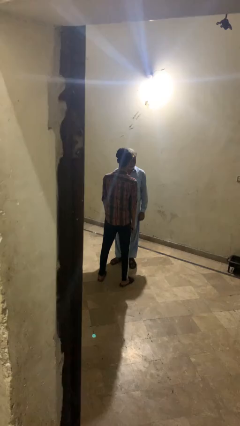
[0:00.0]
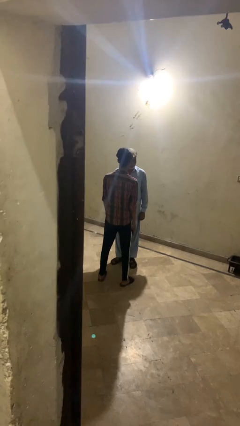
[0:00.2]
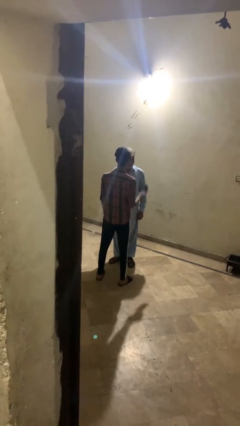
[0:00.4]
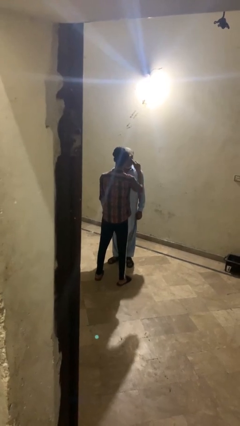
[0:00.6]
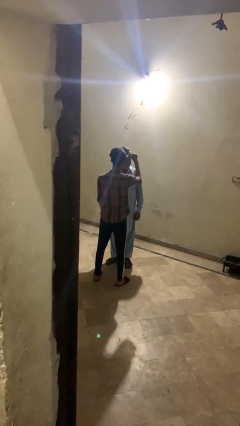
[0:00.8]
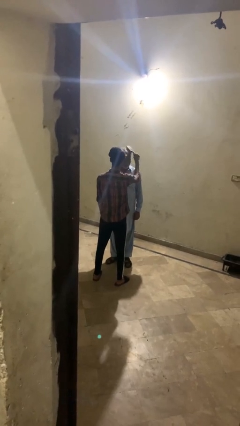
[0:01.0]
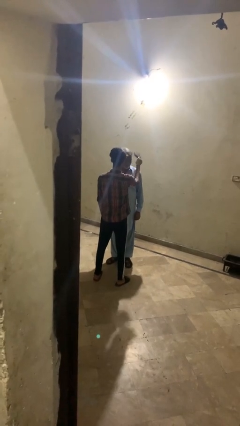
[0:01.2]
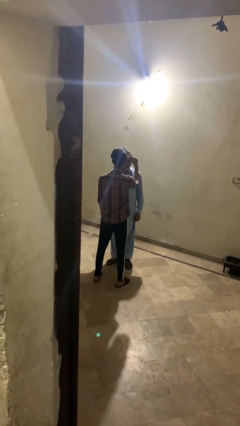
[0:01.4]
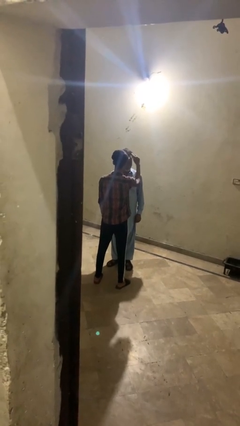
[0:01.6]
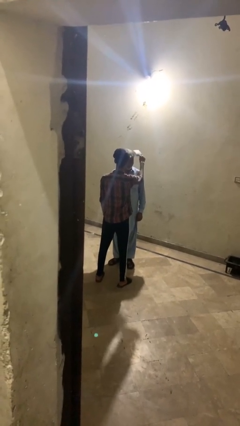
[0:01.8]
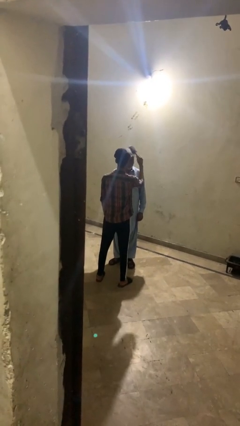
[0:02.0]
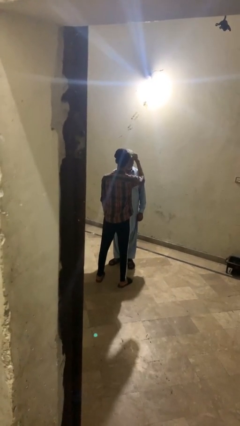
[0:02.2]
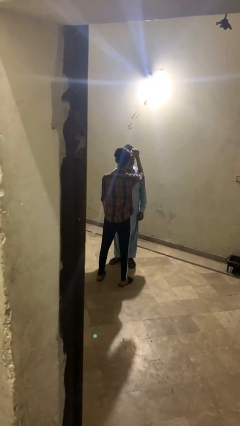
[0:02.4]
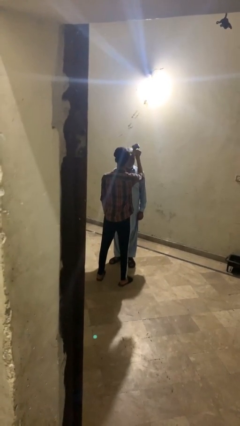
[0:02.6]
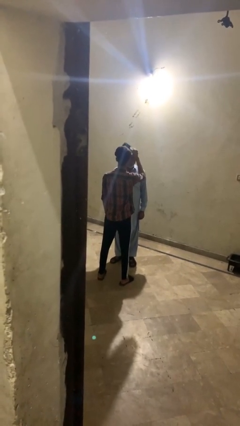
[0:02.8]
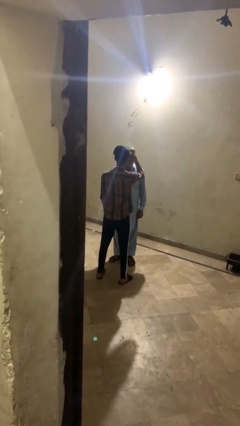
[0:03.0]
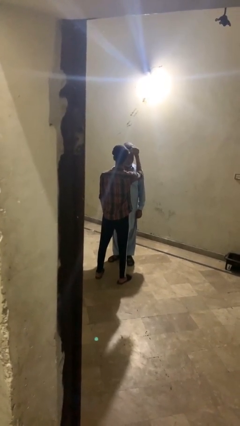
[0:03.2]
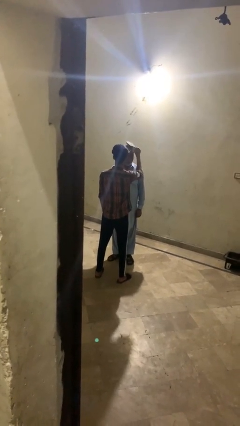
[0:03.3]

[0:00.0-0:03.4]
person brushes hair of person

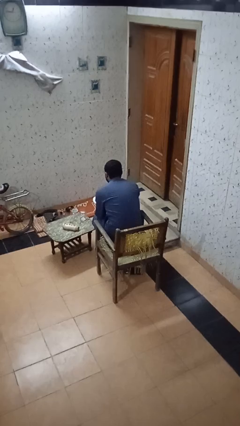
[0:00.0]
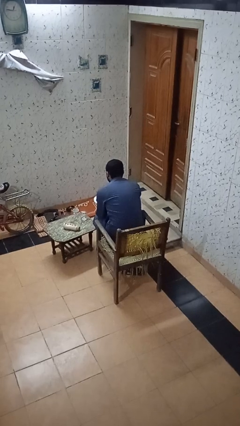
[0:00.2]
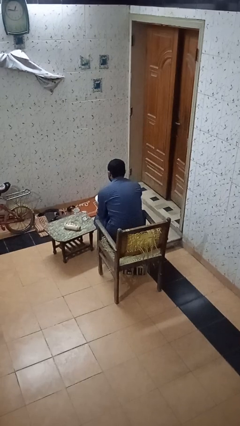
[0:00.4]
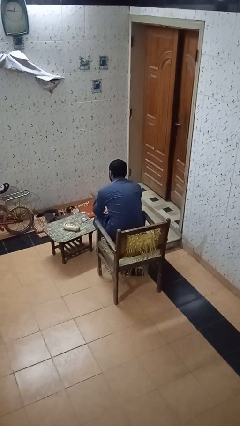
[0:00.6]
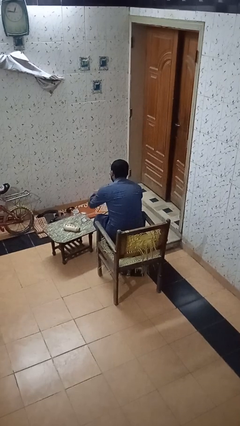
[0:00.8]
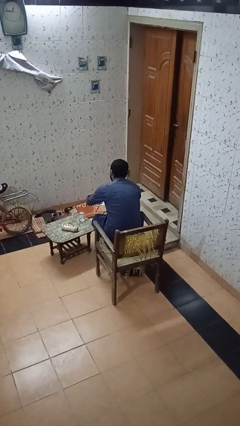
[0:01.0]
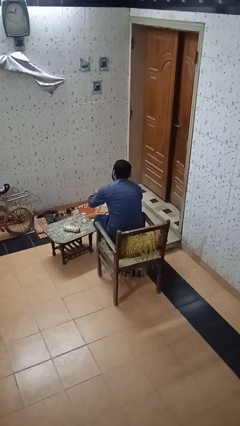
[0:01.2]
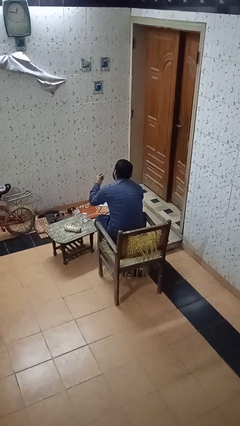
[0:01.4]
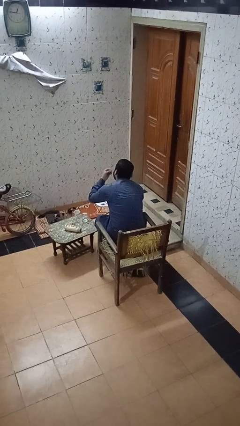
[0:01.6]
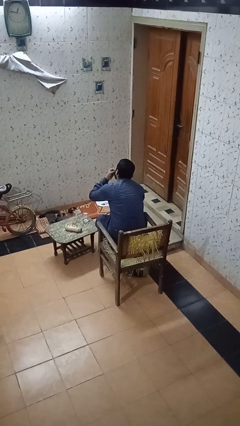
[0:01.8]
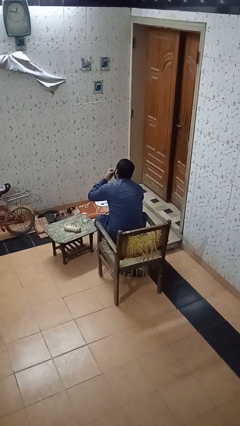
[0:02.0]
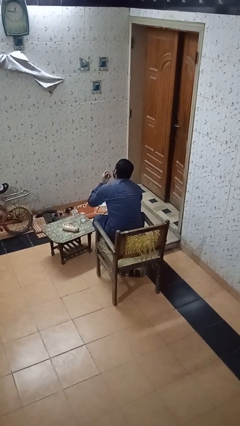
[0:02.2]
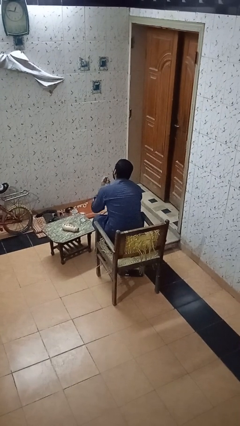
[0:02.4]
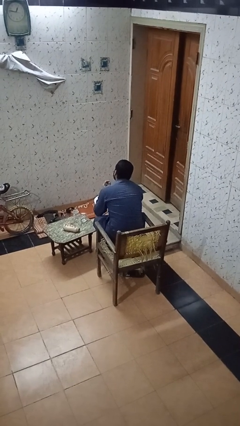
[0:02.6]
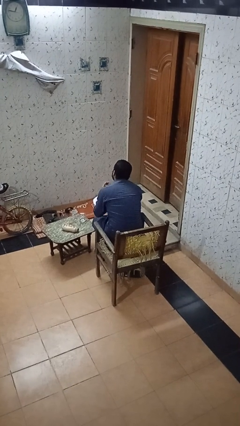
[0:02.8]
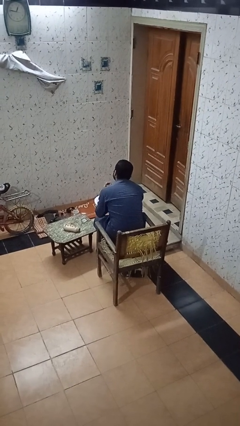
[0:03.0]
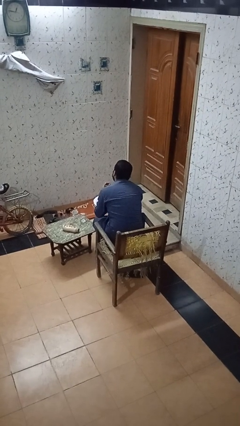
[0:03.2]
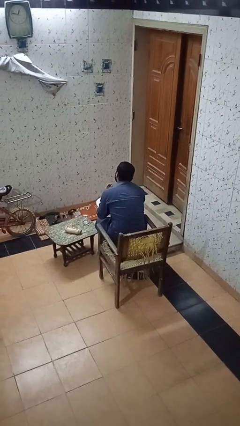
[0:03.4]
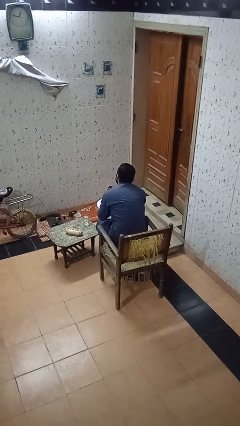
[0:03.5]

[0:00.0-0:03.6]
person eats with hands

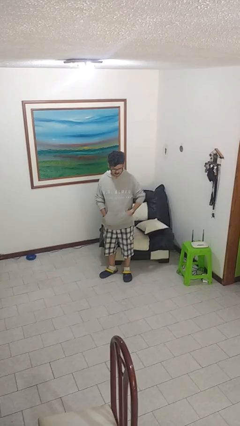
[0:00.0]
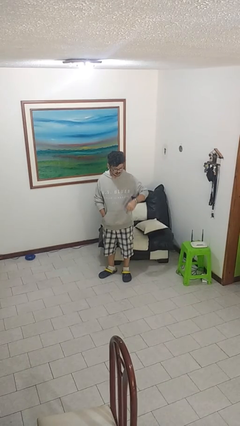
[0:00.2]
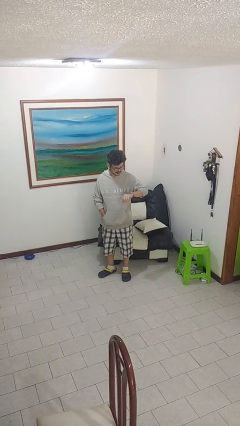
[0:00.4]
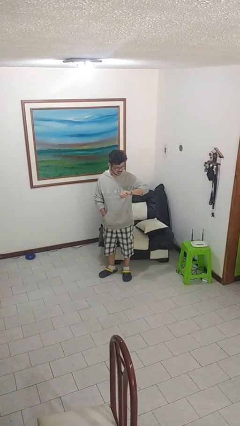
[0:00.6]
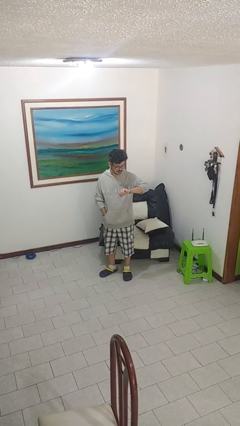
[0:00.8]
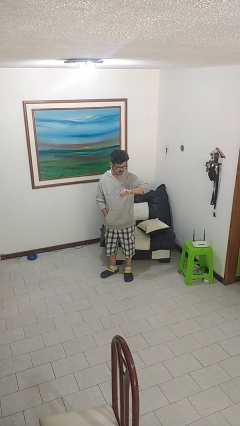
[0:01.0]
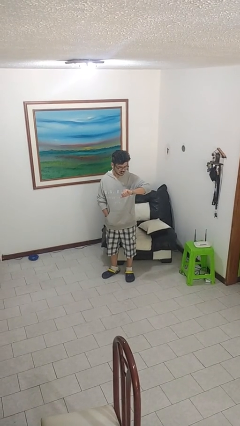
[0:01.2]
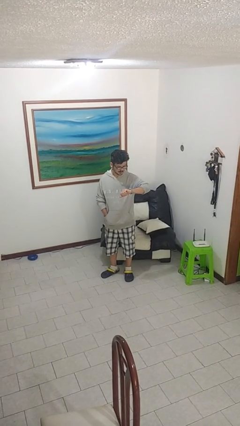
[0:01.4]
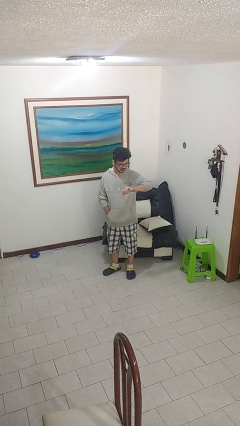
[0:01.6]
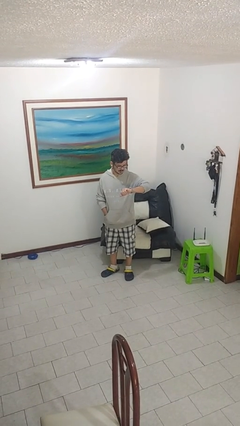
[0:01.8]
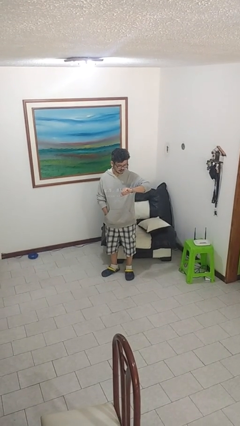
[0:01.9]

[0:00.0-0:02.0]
person looks at wristwatch

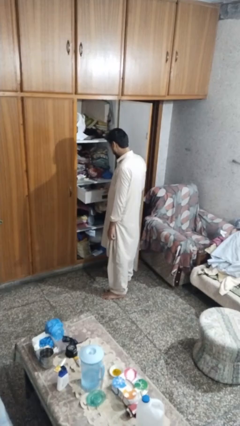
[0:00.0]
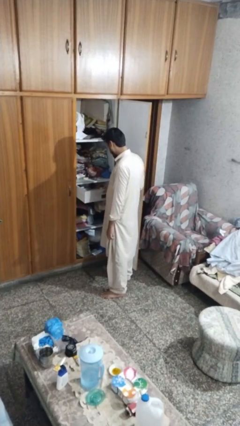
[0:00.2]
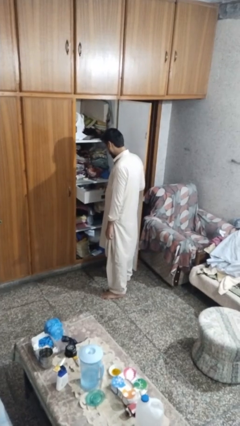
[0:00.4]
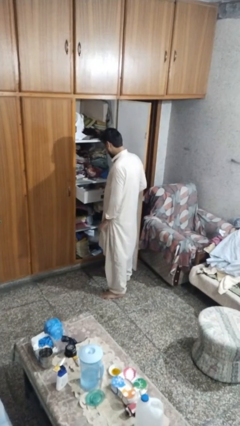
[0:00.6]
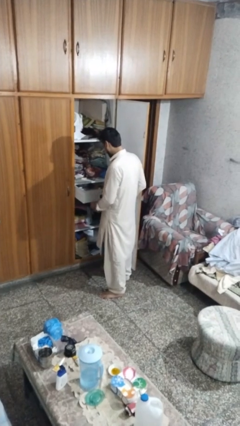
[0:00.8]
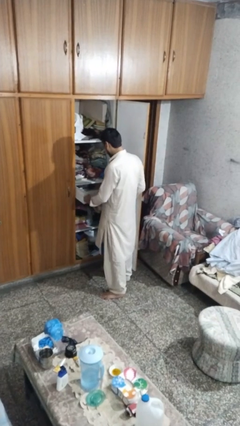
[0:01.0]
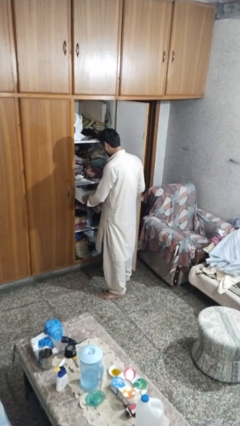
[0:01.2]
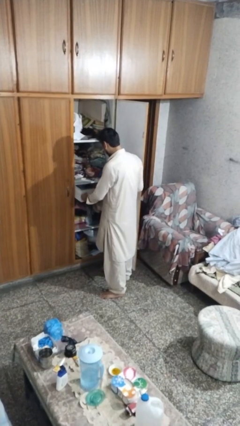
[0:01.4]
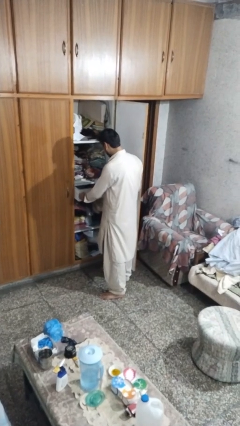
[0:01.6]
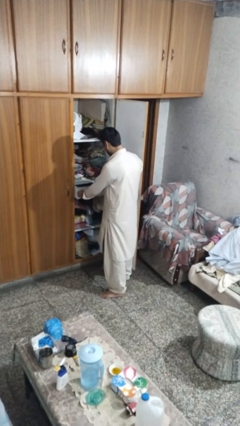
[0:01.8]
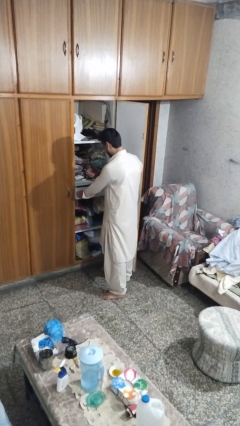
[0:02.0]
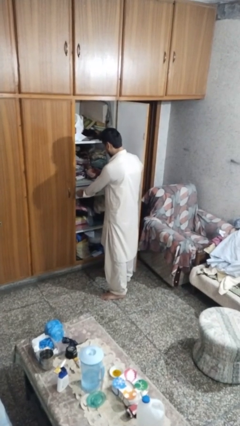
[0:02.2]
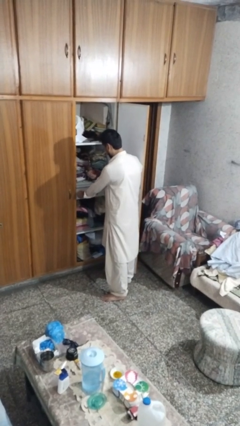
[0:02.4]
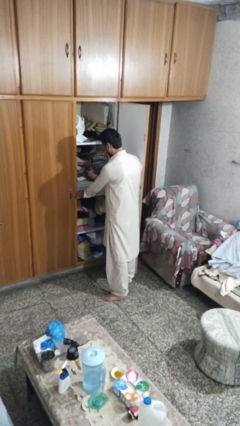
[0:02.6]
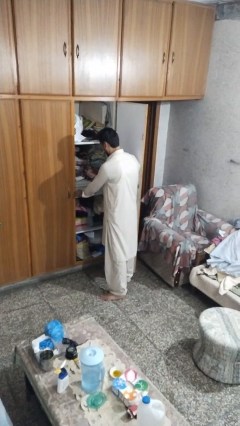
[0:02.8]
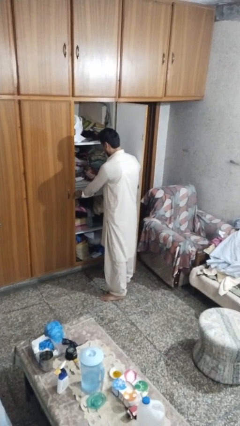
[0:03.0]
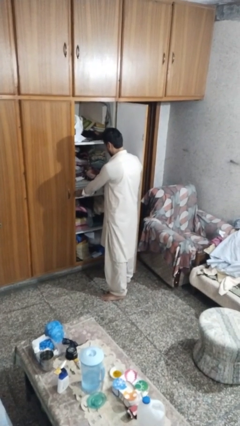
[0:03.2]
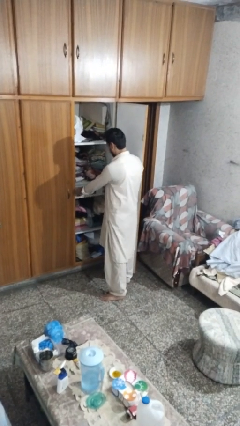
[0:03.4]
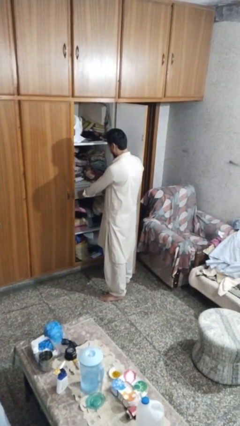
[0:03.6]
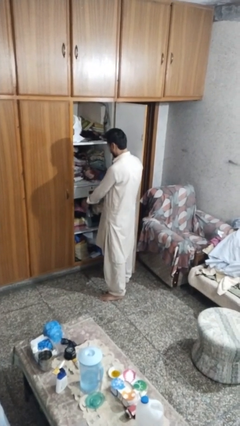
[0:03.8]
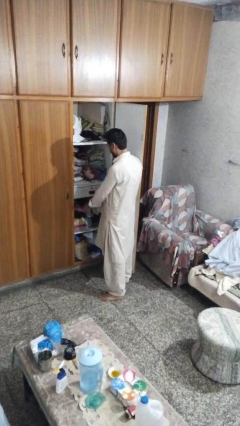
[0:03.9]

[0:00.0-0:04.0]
person closes dresser drawer

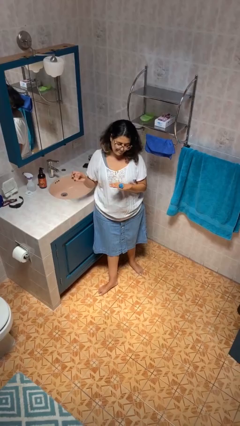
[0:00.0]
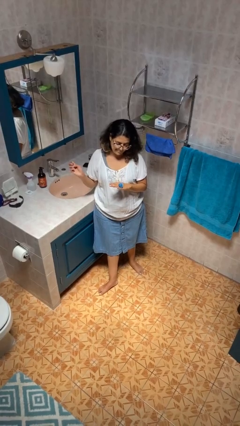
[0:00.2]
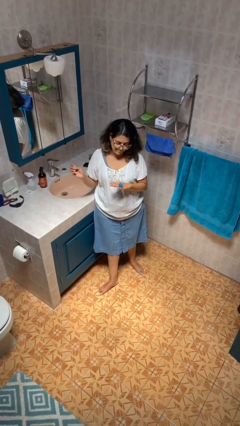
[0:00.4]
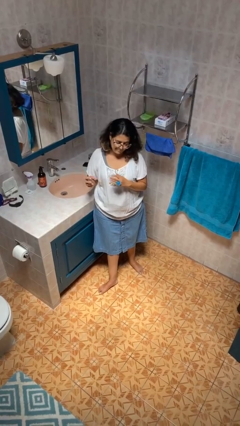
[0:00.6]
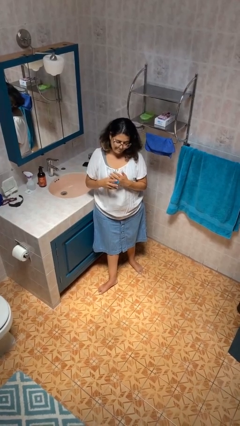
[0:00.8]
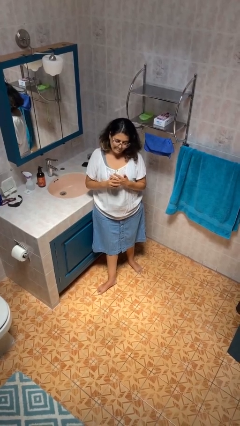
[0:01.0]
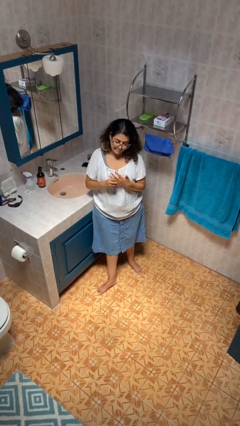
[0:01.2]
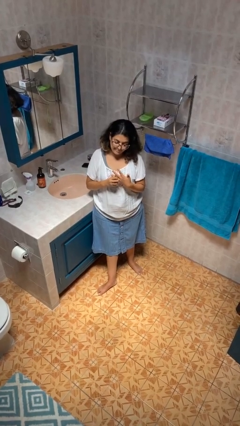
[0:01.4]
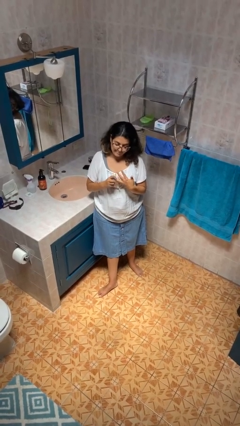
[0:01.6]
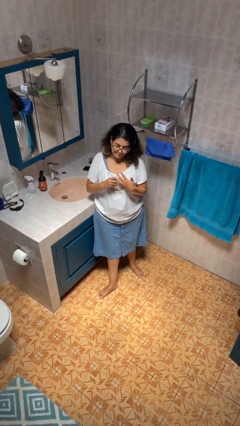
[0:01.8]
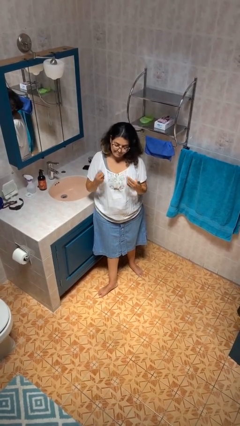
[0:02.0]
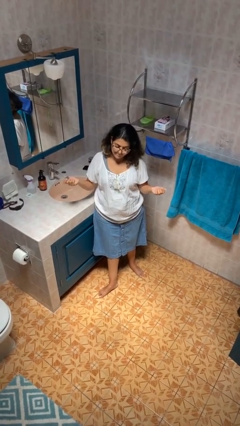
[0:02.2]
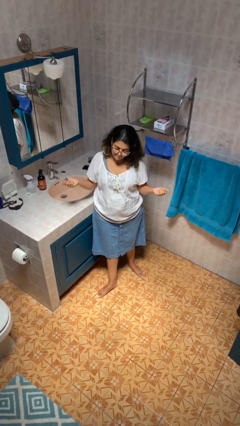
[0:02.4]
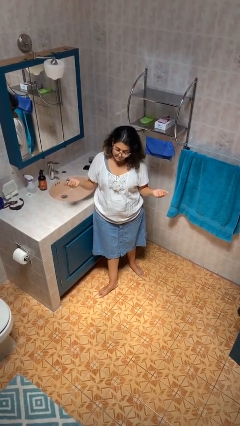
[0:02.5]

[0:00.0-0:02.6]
person takes off ring

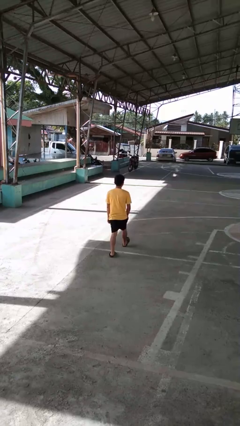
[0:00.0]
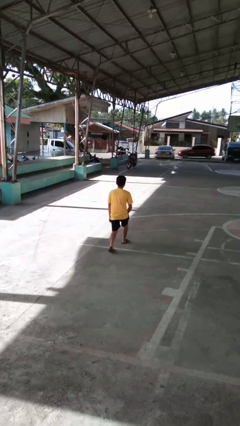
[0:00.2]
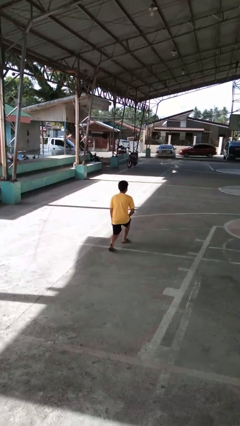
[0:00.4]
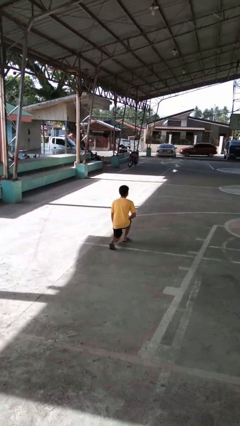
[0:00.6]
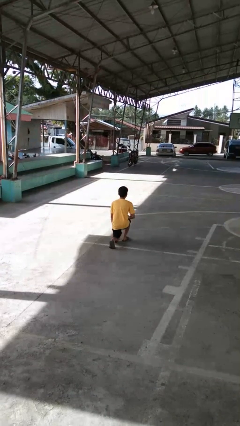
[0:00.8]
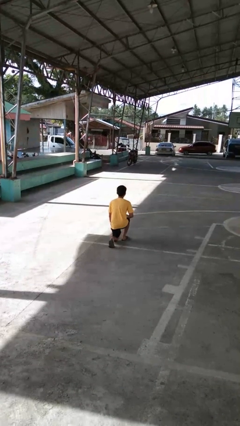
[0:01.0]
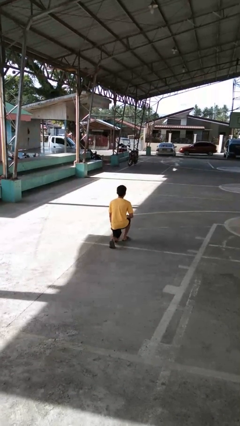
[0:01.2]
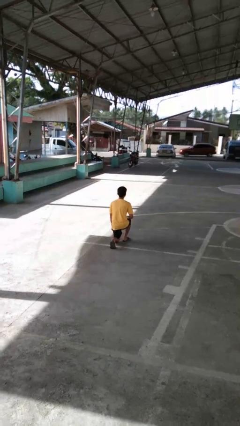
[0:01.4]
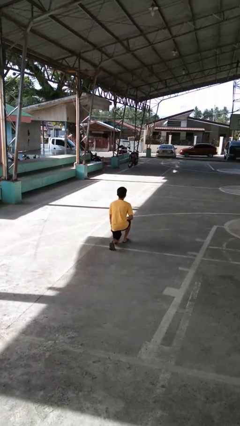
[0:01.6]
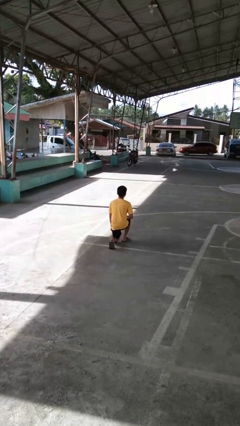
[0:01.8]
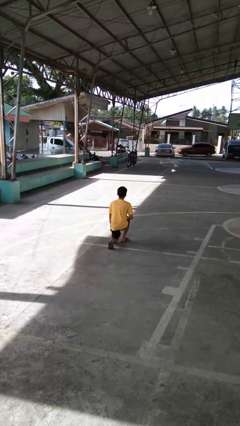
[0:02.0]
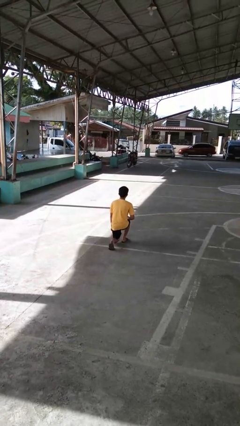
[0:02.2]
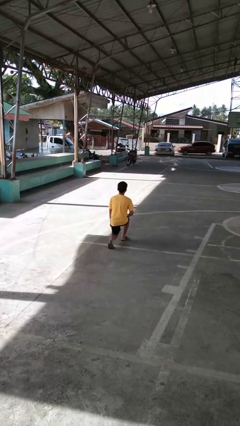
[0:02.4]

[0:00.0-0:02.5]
person kneels
